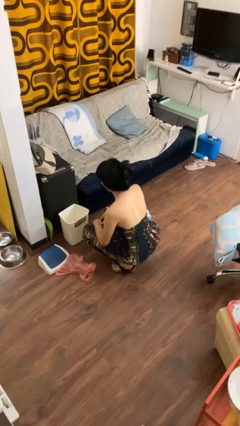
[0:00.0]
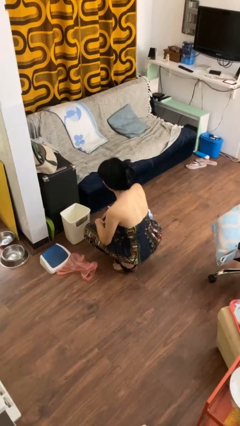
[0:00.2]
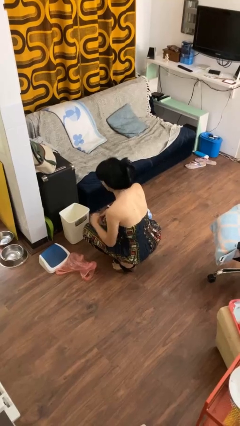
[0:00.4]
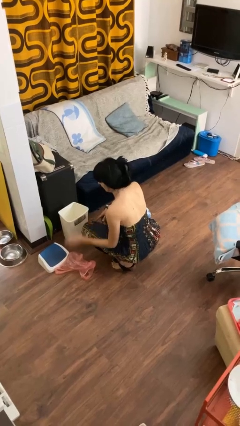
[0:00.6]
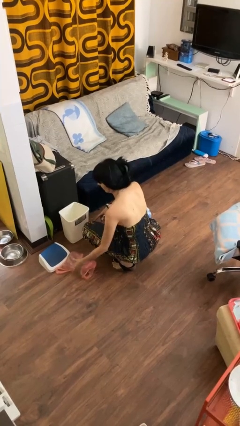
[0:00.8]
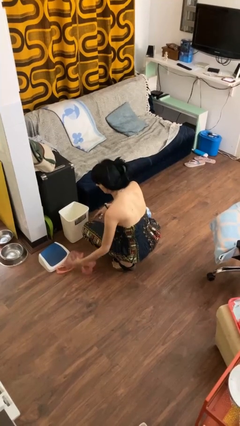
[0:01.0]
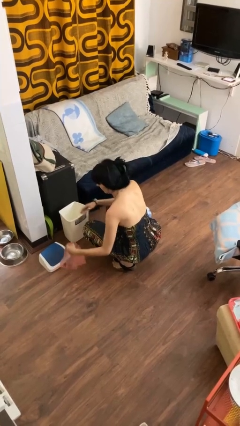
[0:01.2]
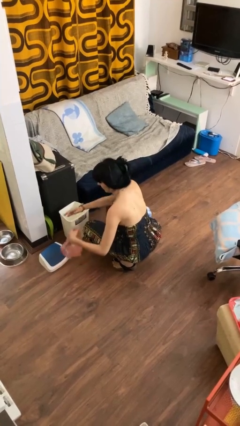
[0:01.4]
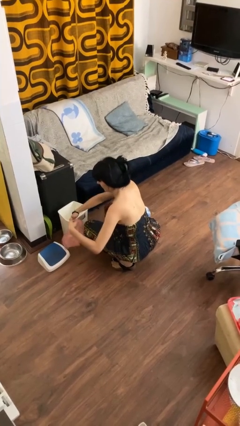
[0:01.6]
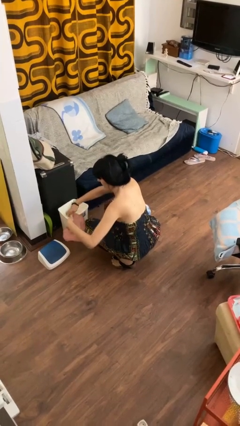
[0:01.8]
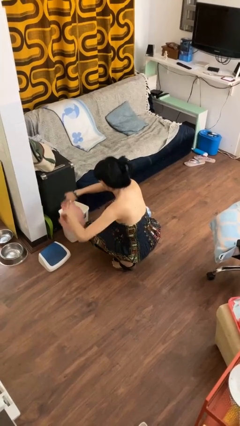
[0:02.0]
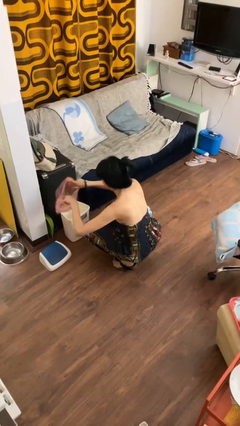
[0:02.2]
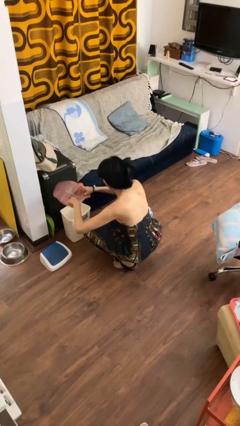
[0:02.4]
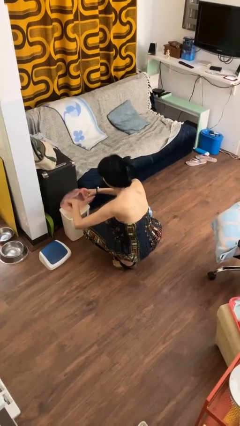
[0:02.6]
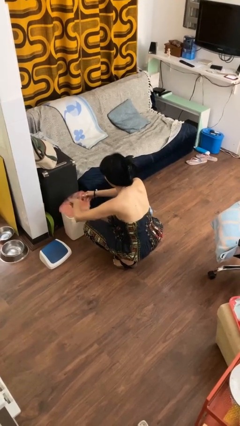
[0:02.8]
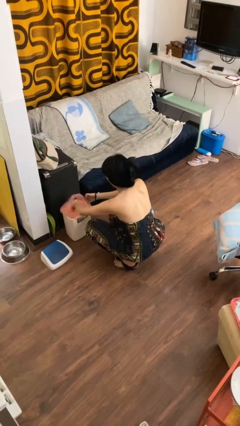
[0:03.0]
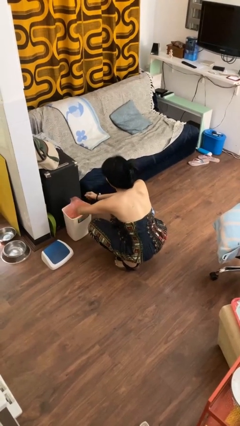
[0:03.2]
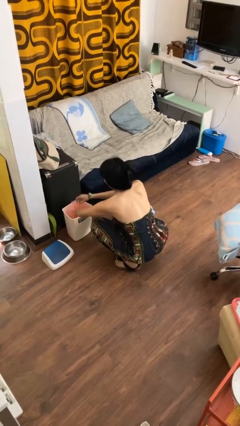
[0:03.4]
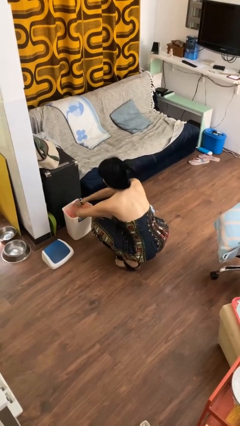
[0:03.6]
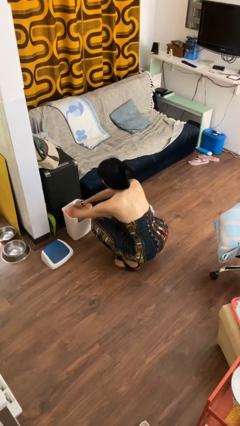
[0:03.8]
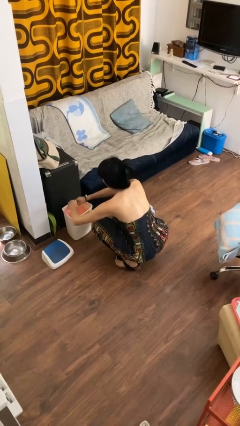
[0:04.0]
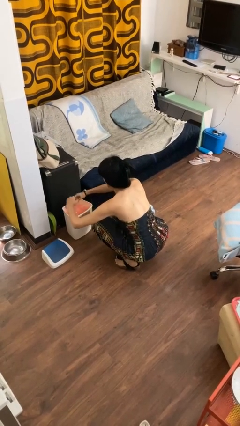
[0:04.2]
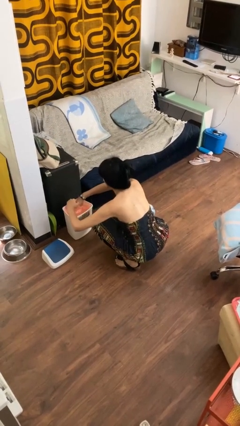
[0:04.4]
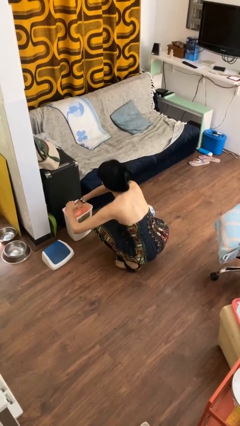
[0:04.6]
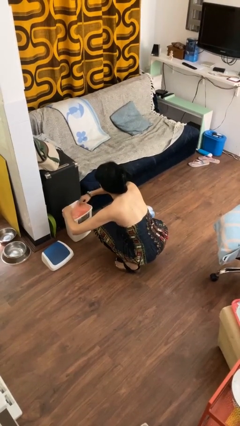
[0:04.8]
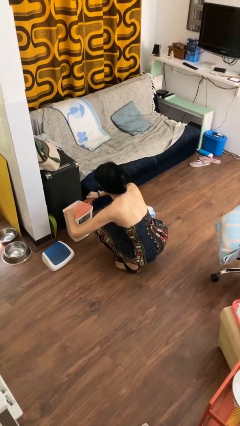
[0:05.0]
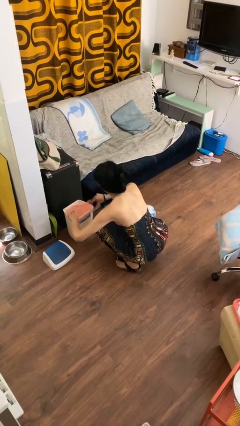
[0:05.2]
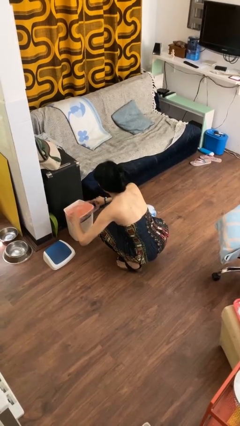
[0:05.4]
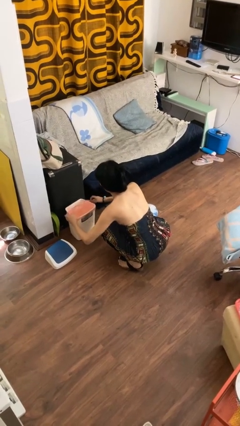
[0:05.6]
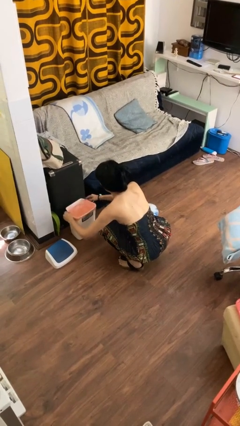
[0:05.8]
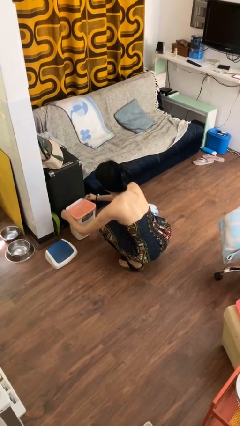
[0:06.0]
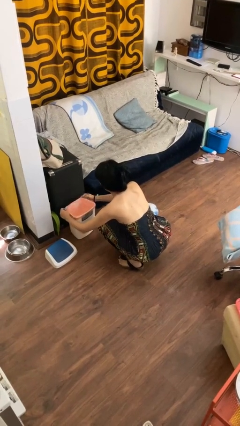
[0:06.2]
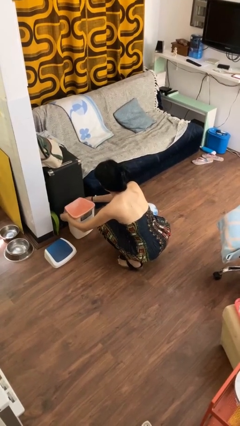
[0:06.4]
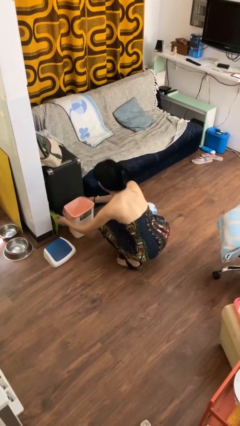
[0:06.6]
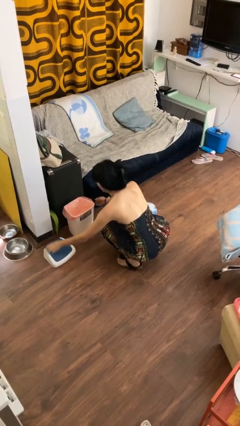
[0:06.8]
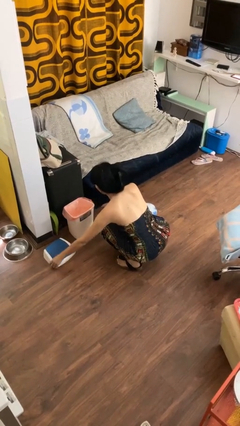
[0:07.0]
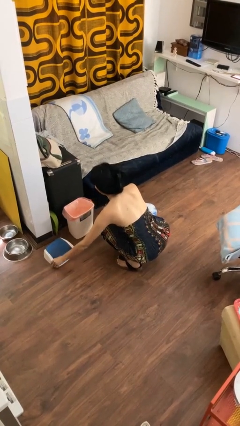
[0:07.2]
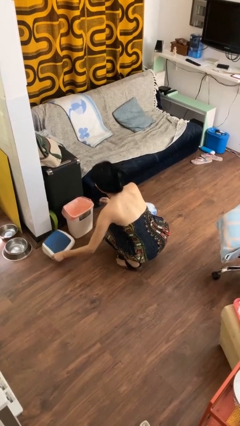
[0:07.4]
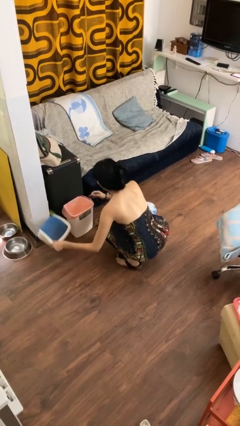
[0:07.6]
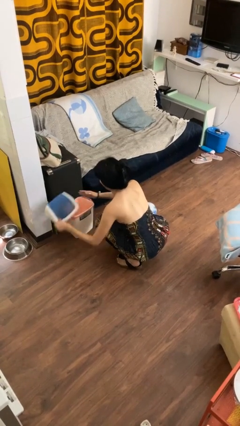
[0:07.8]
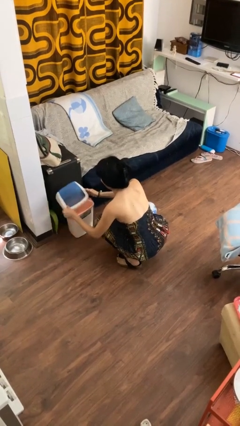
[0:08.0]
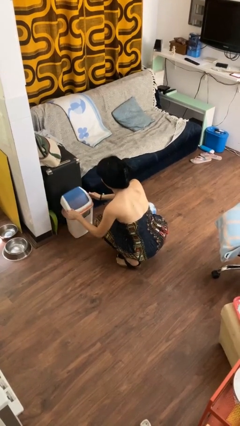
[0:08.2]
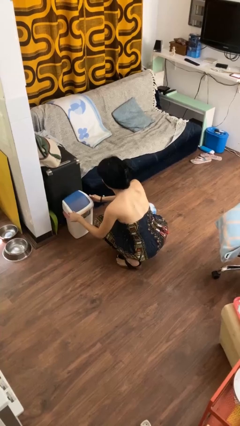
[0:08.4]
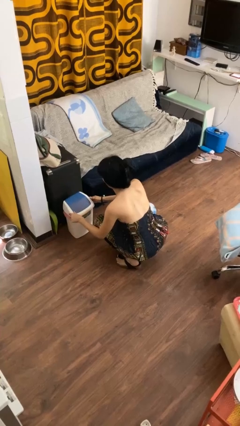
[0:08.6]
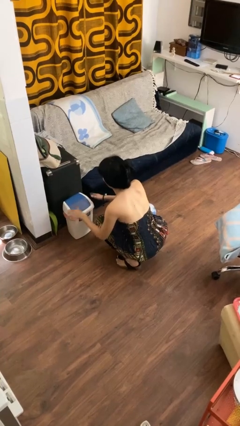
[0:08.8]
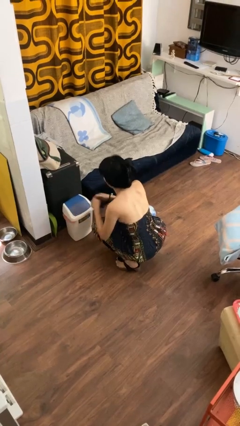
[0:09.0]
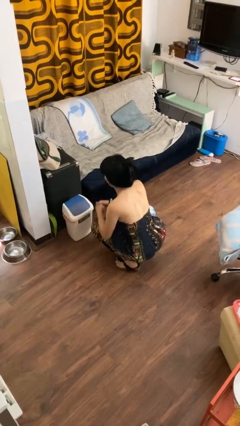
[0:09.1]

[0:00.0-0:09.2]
person inserts trashbag into trashcan

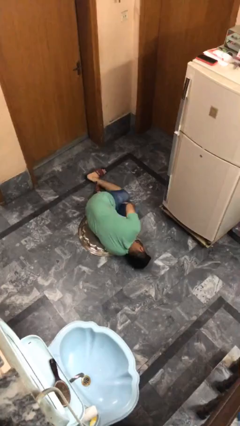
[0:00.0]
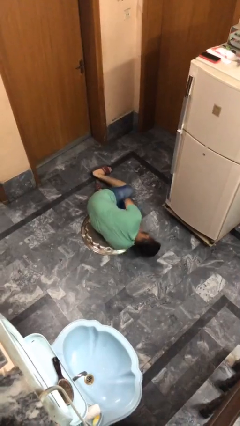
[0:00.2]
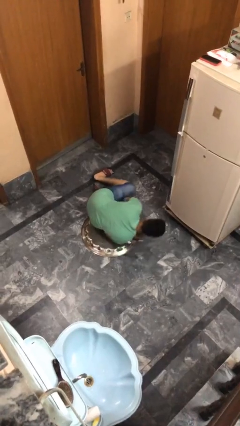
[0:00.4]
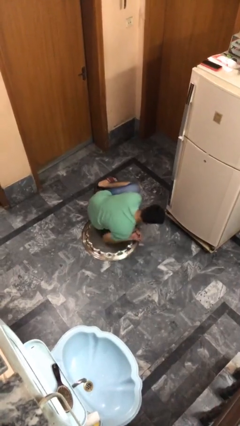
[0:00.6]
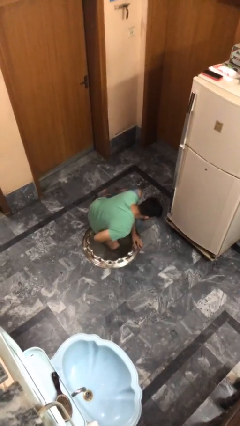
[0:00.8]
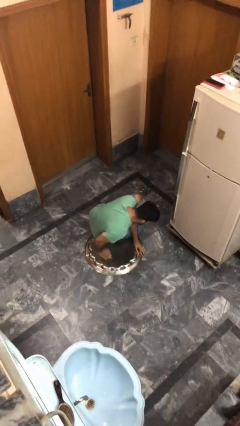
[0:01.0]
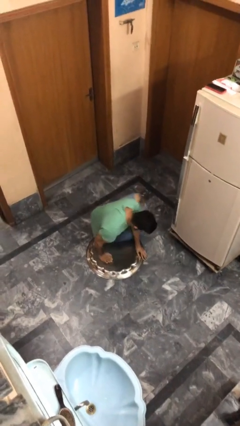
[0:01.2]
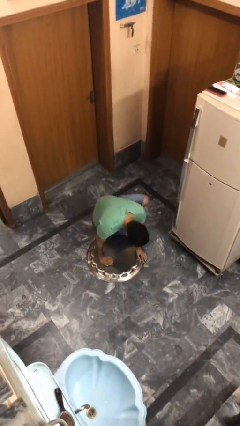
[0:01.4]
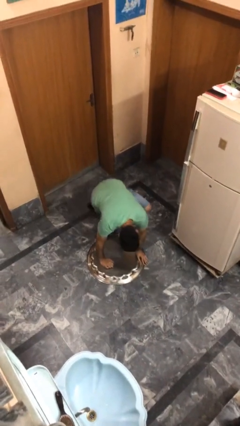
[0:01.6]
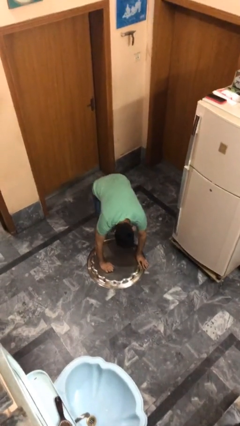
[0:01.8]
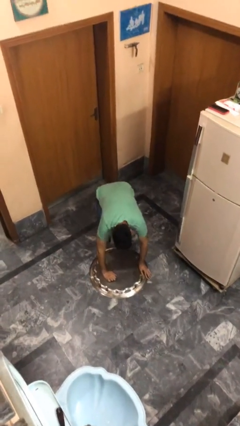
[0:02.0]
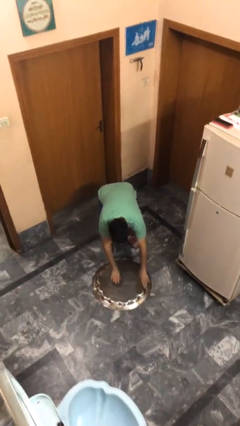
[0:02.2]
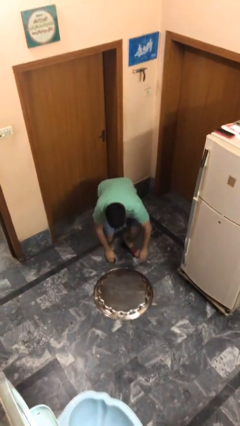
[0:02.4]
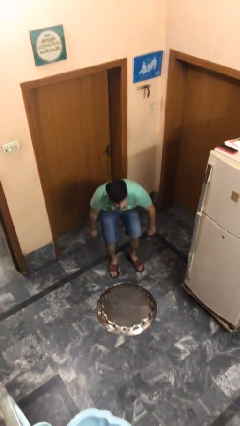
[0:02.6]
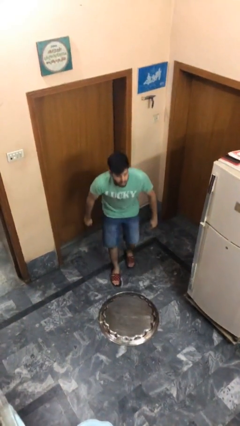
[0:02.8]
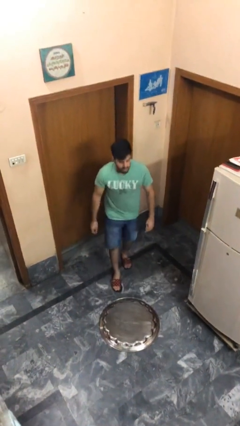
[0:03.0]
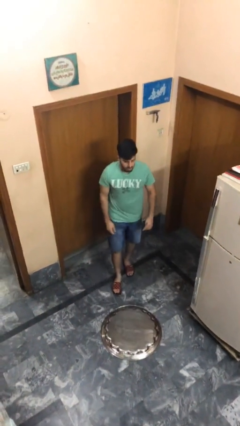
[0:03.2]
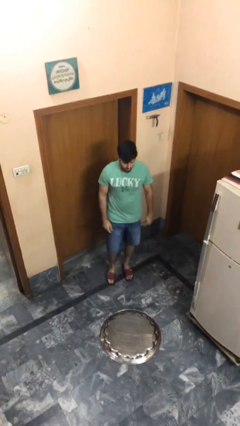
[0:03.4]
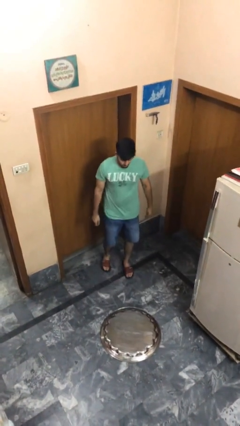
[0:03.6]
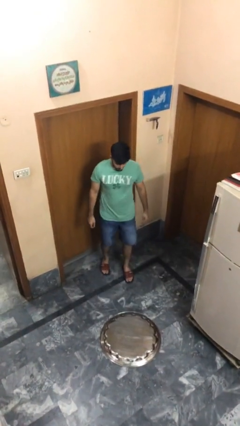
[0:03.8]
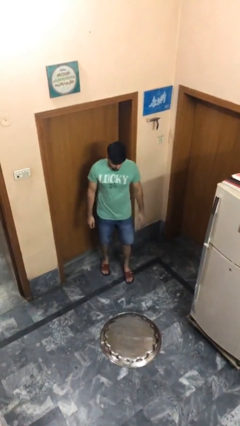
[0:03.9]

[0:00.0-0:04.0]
person stands up from floor

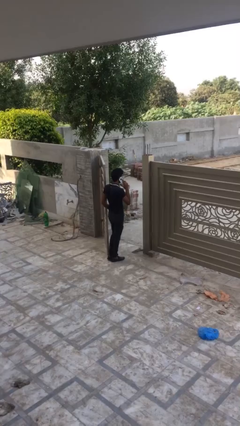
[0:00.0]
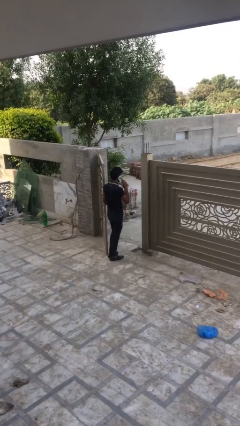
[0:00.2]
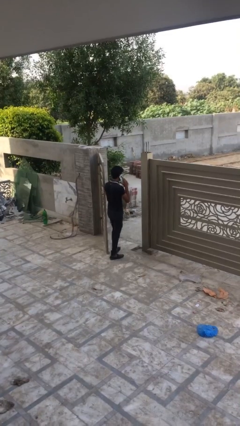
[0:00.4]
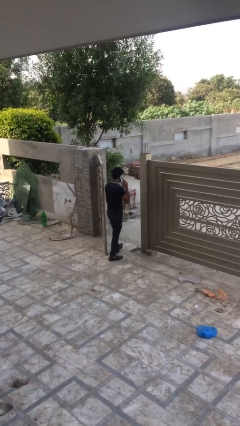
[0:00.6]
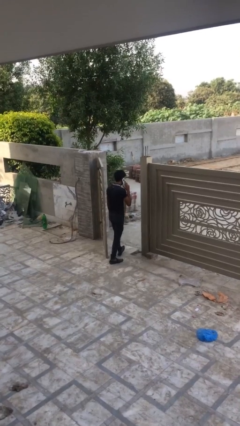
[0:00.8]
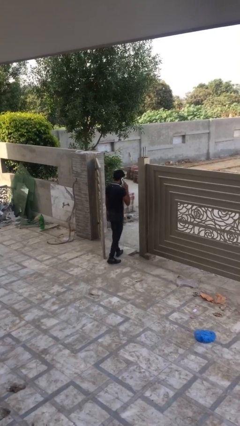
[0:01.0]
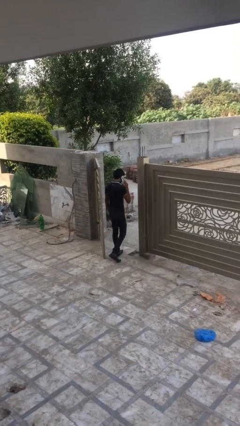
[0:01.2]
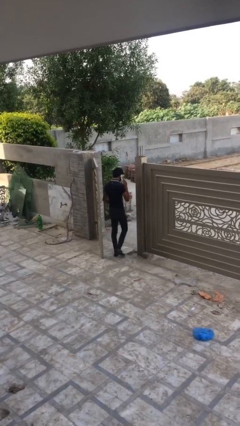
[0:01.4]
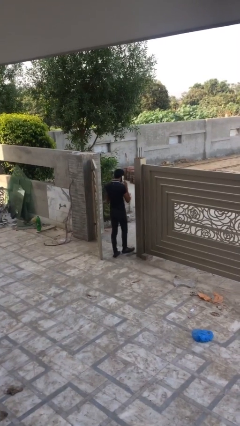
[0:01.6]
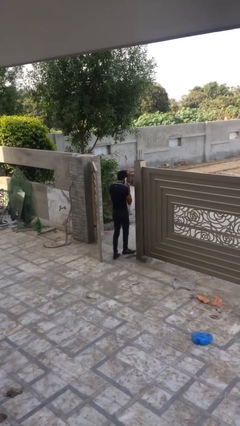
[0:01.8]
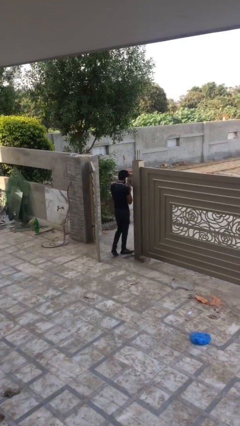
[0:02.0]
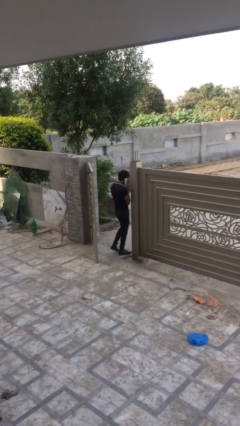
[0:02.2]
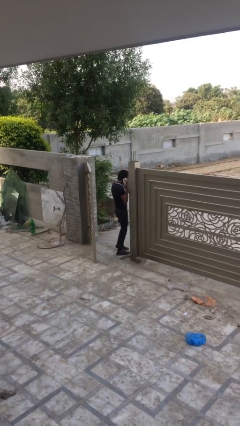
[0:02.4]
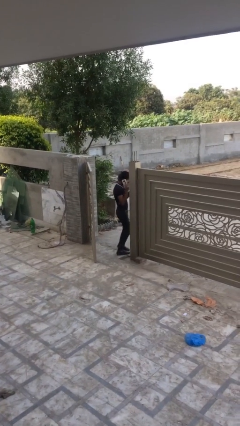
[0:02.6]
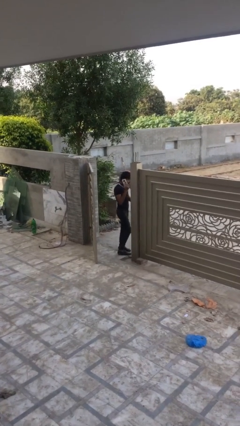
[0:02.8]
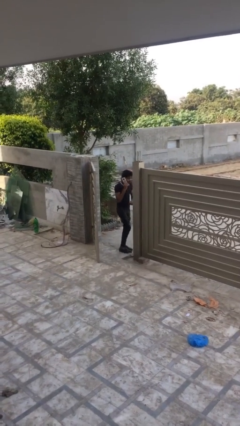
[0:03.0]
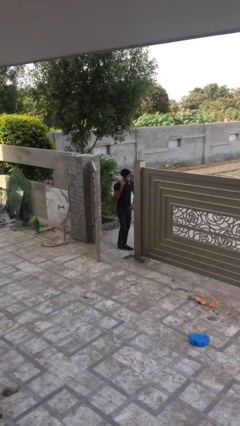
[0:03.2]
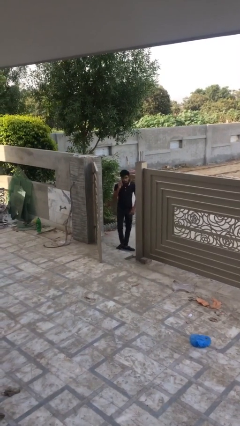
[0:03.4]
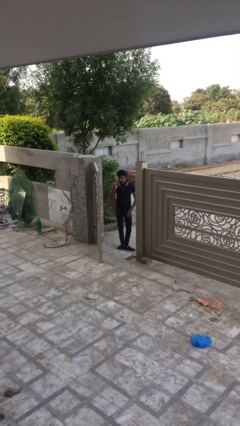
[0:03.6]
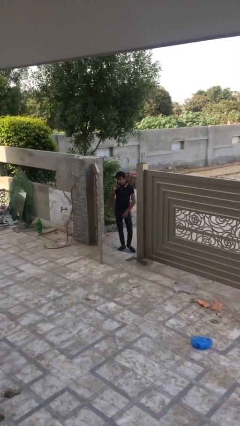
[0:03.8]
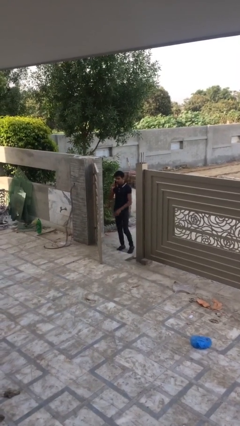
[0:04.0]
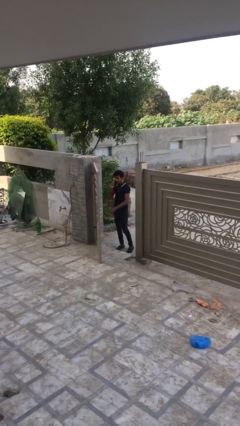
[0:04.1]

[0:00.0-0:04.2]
person exits scene through structure

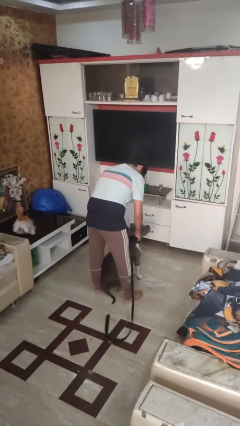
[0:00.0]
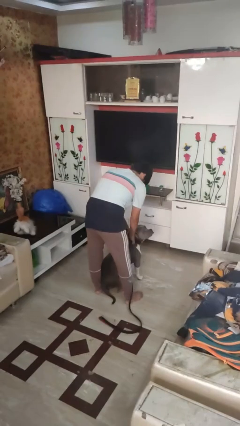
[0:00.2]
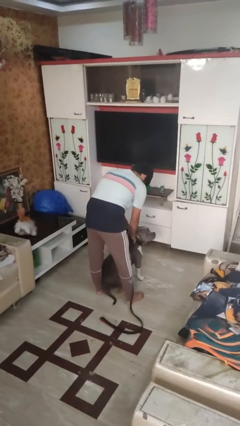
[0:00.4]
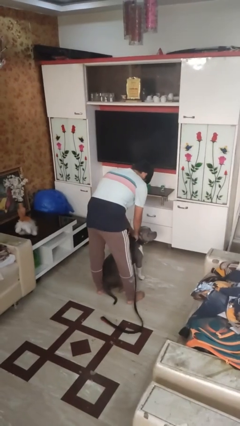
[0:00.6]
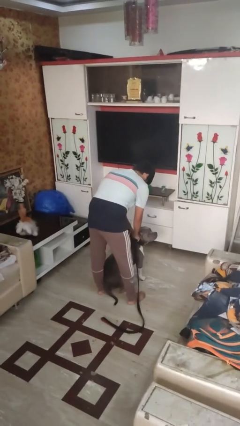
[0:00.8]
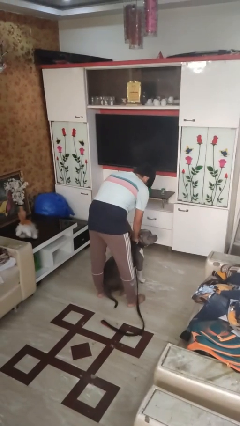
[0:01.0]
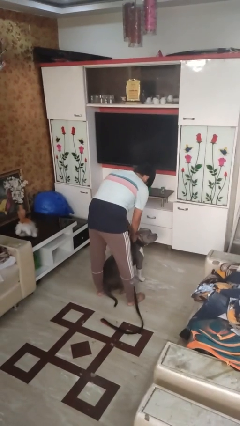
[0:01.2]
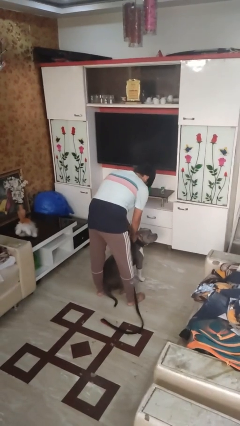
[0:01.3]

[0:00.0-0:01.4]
person attaches leash to dog
